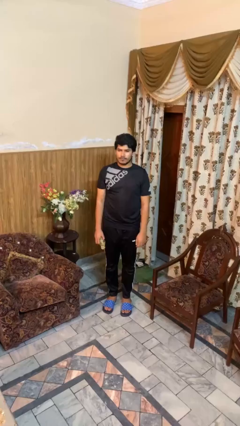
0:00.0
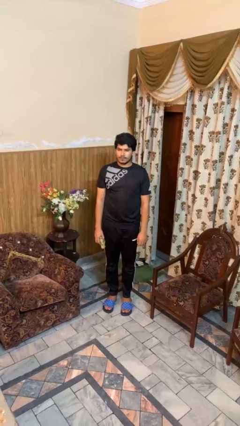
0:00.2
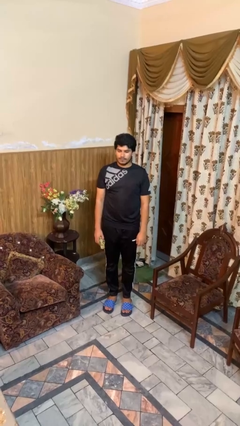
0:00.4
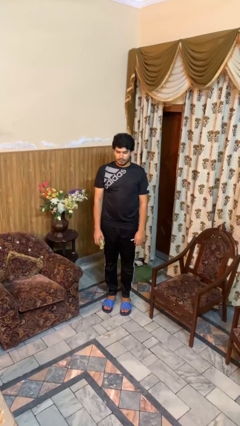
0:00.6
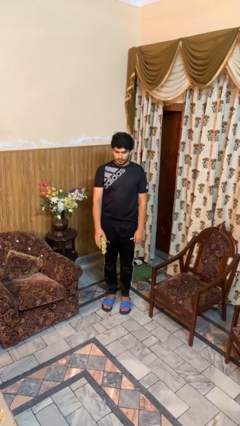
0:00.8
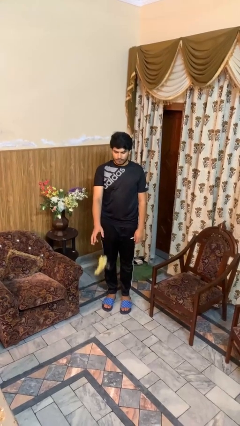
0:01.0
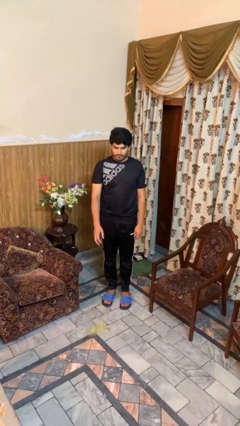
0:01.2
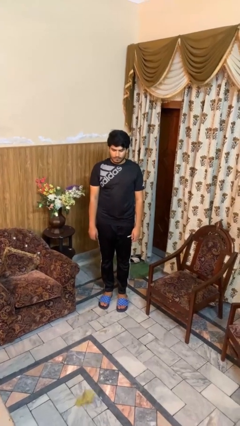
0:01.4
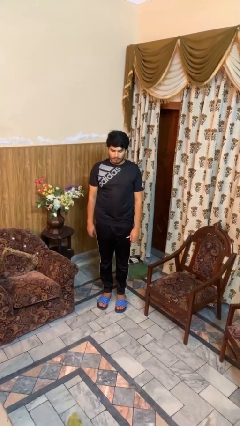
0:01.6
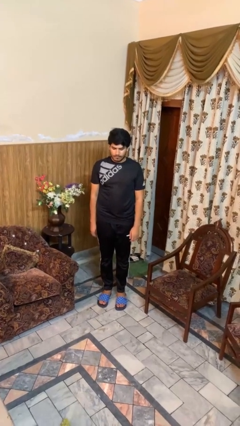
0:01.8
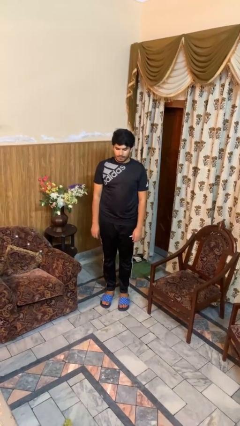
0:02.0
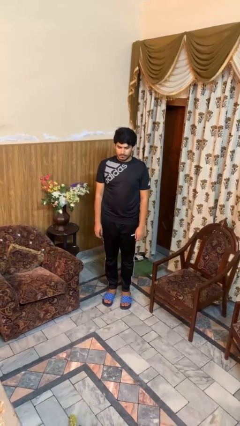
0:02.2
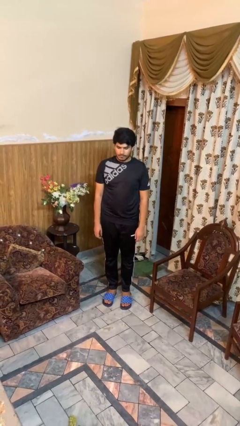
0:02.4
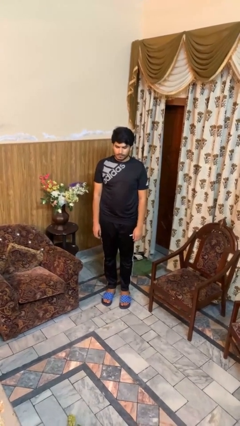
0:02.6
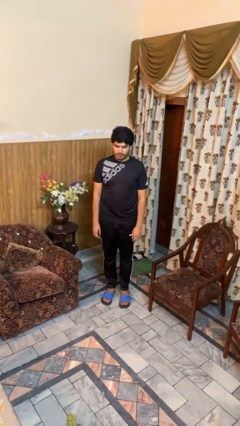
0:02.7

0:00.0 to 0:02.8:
person throws object to ground

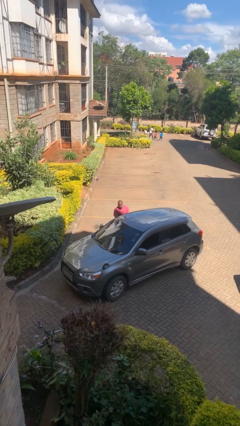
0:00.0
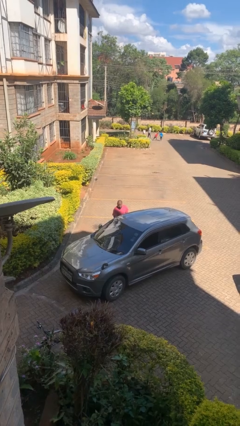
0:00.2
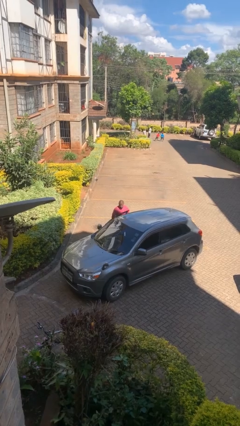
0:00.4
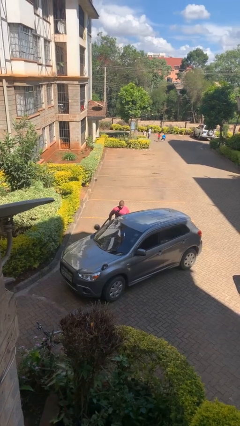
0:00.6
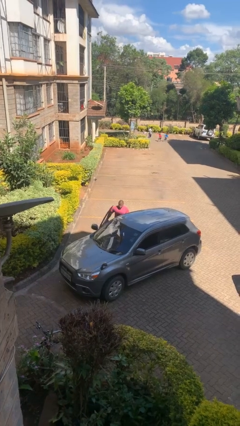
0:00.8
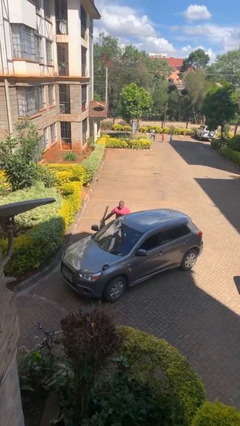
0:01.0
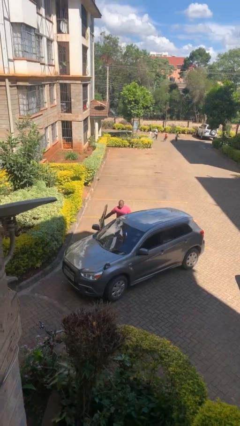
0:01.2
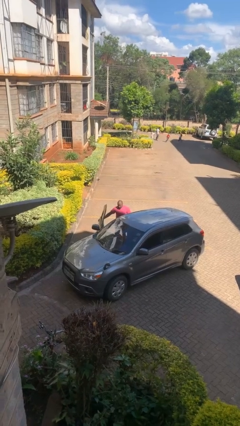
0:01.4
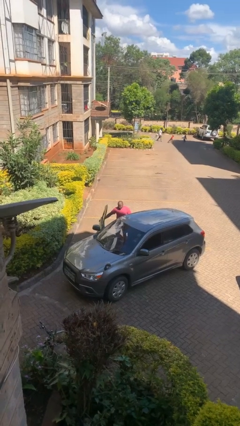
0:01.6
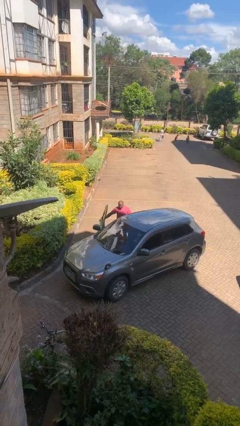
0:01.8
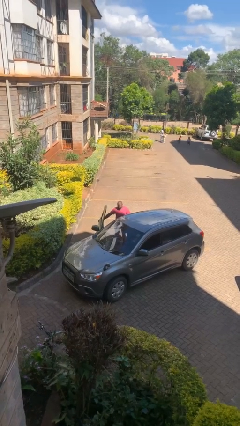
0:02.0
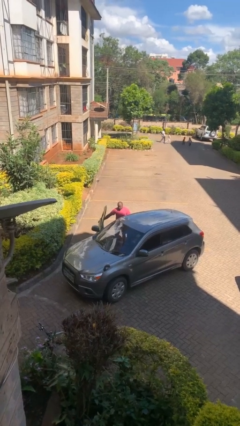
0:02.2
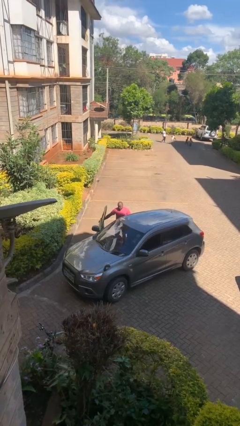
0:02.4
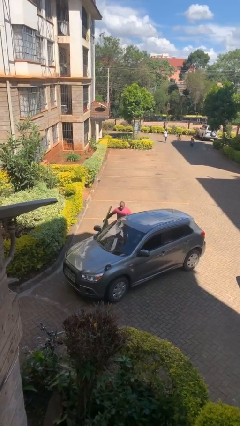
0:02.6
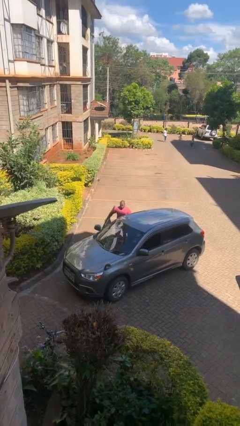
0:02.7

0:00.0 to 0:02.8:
person opens car door

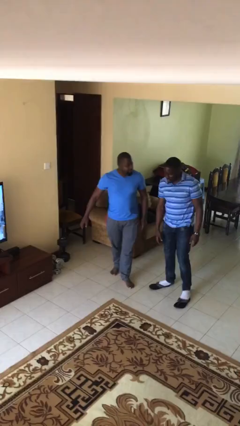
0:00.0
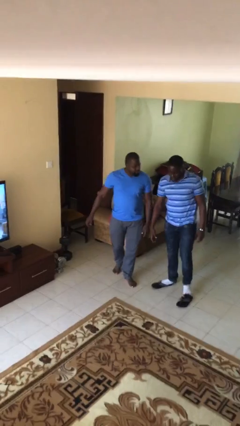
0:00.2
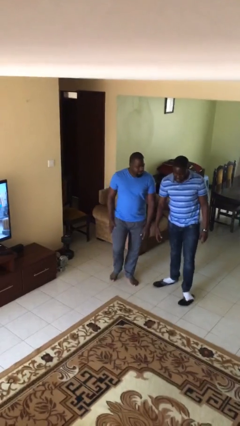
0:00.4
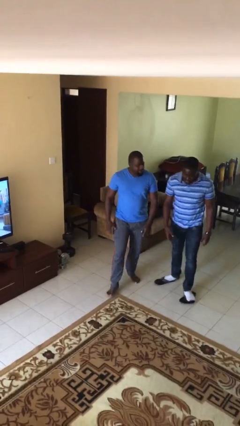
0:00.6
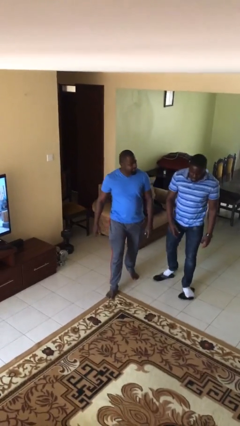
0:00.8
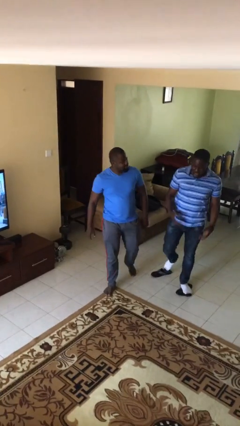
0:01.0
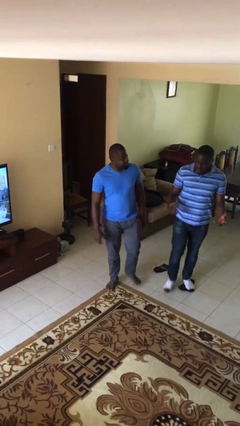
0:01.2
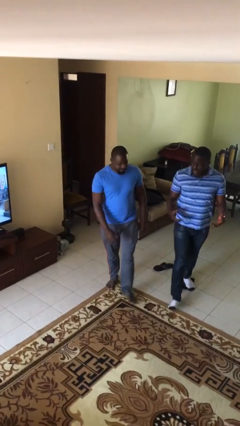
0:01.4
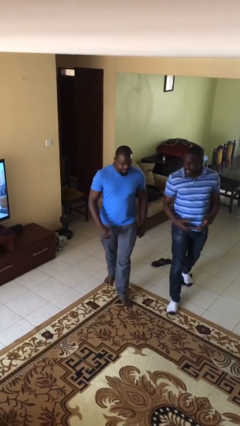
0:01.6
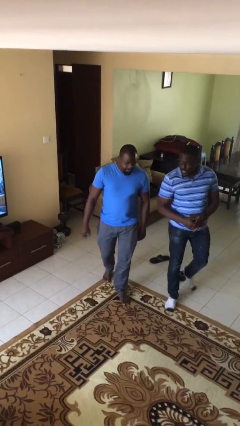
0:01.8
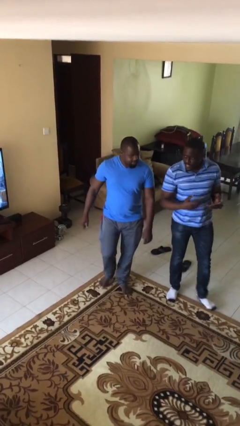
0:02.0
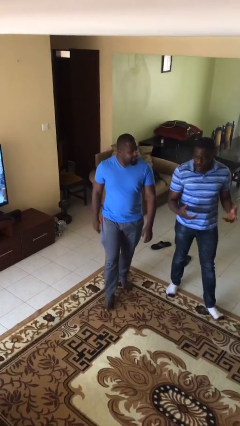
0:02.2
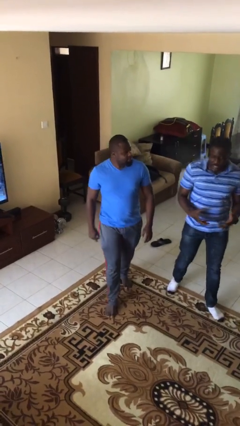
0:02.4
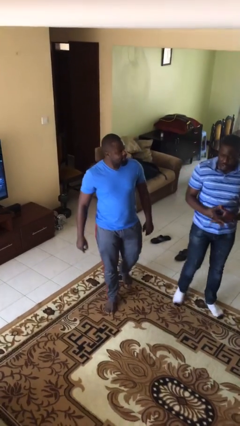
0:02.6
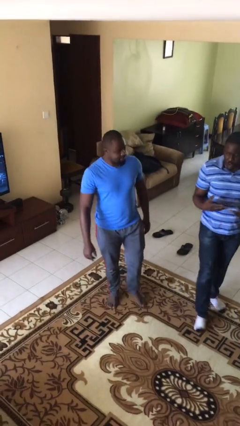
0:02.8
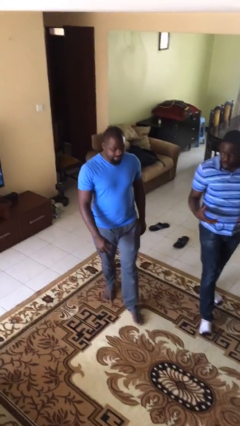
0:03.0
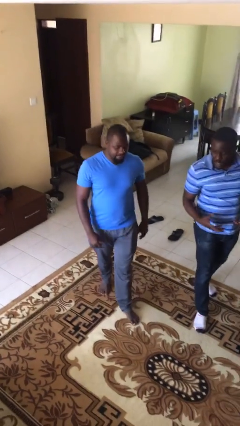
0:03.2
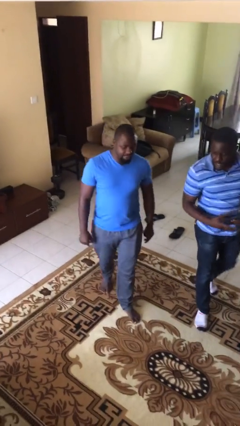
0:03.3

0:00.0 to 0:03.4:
person talks to person

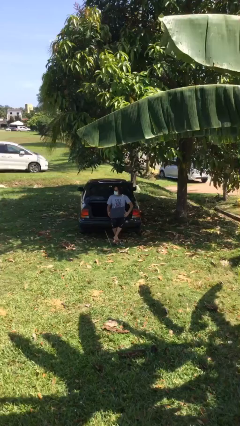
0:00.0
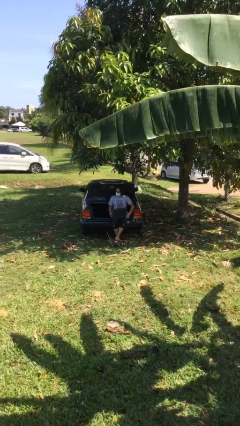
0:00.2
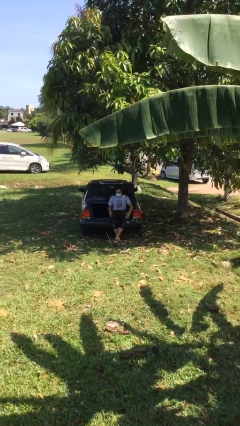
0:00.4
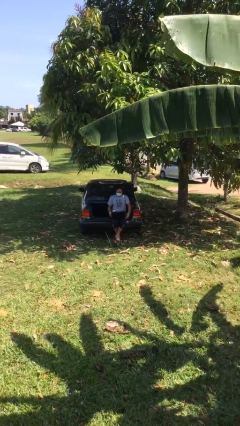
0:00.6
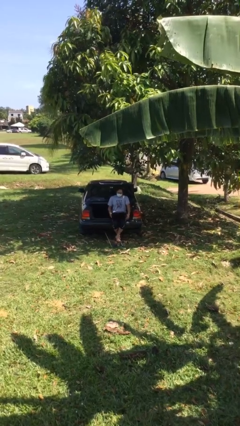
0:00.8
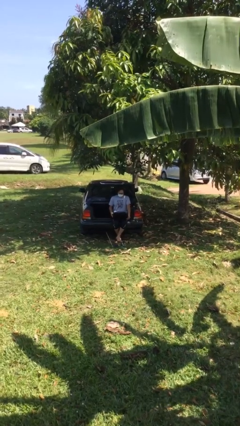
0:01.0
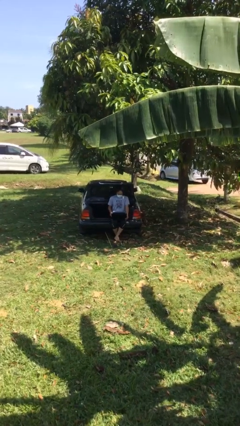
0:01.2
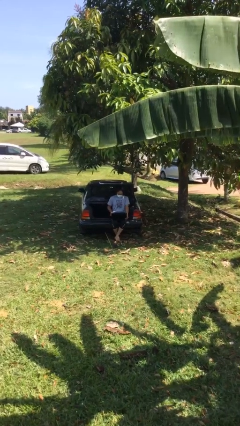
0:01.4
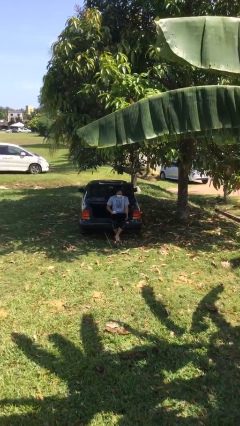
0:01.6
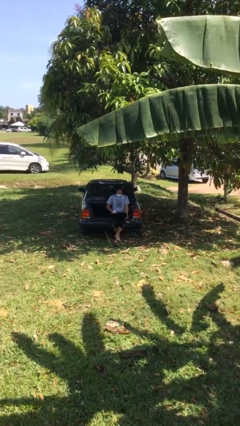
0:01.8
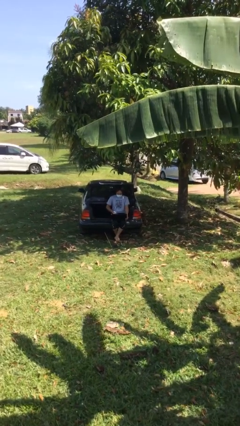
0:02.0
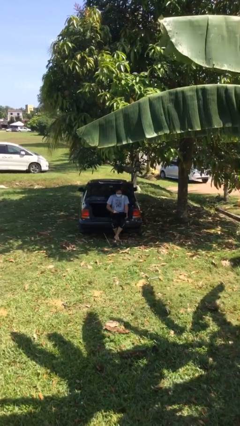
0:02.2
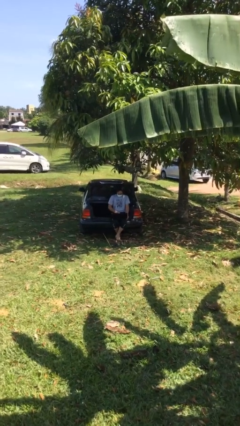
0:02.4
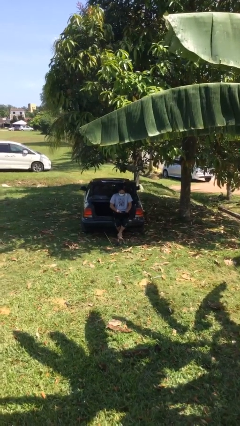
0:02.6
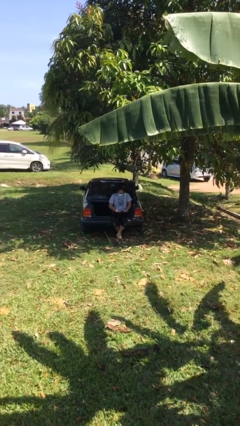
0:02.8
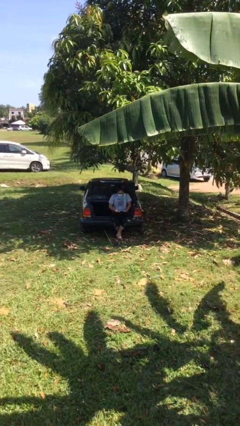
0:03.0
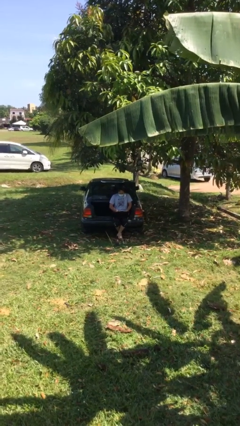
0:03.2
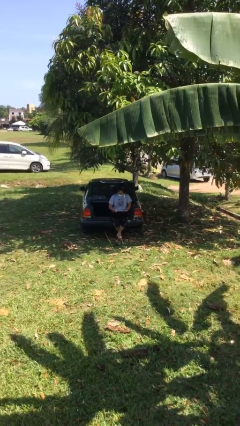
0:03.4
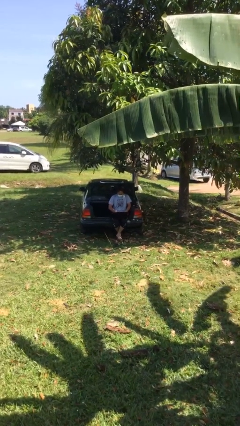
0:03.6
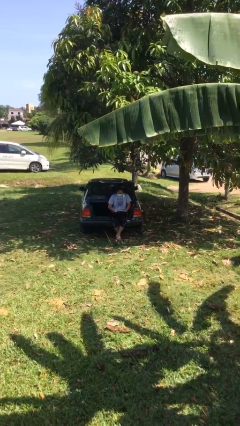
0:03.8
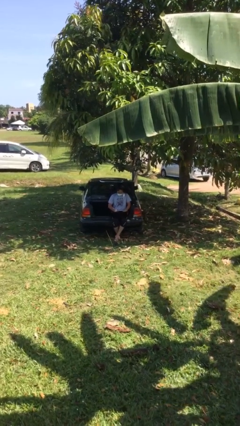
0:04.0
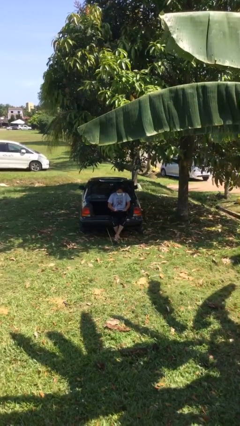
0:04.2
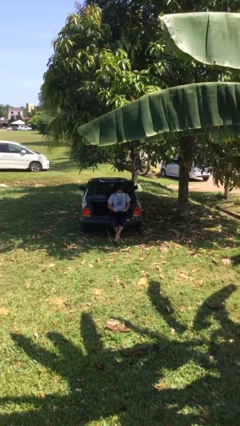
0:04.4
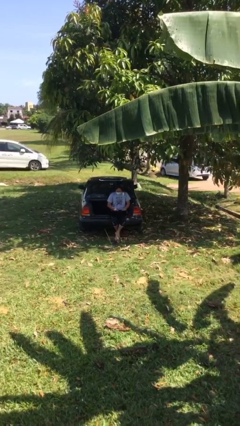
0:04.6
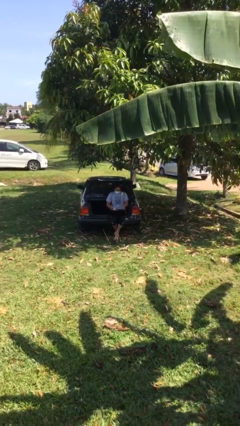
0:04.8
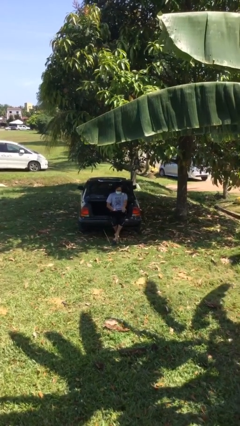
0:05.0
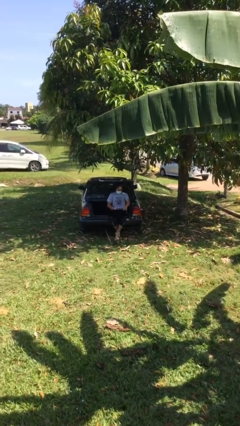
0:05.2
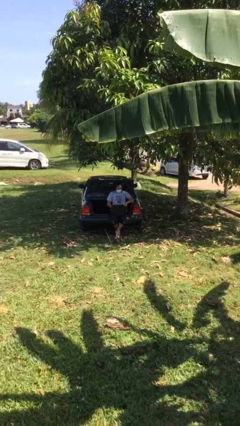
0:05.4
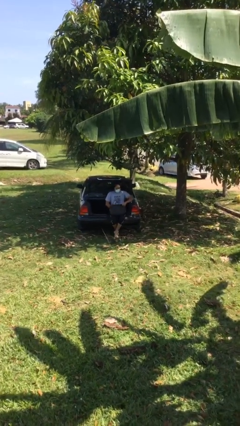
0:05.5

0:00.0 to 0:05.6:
person interacts with laptop

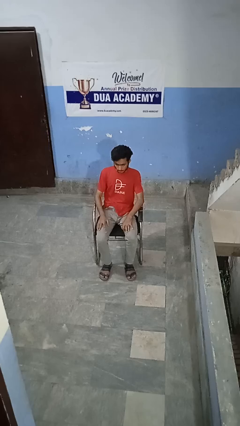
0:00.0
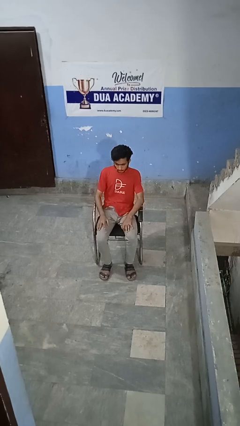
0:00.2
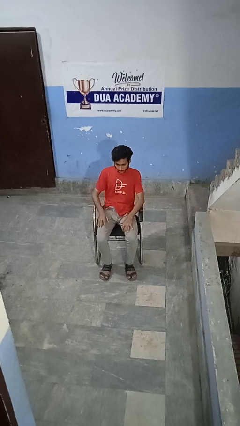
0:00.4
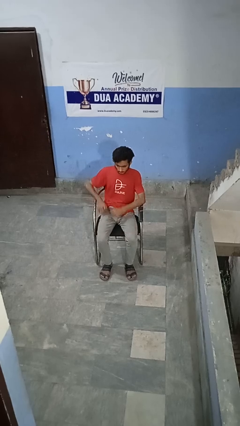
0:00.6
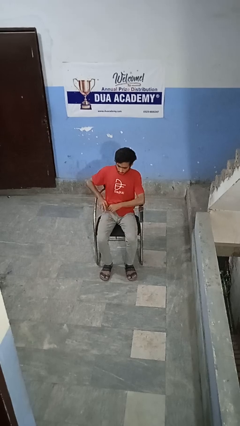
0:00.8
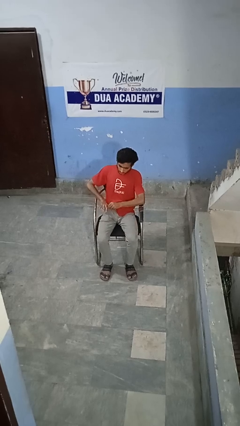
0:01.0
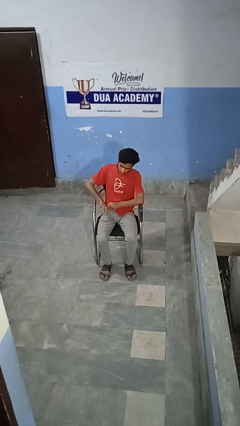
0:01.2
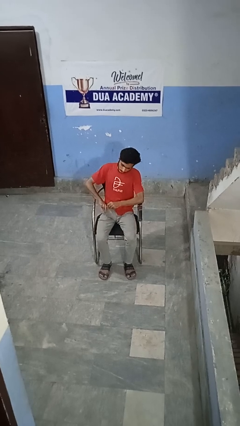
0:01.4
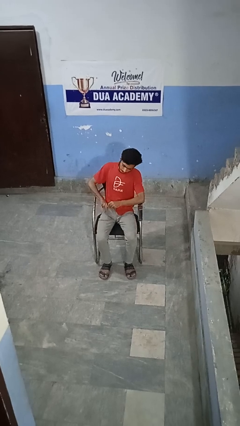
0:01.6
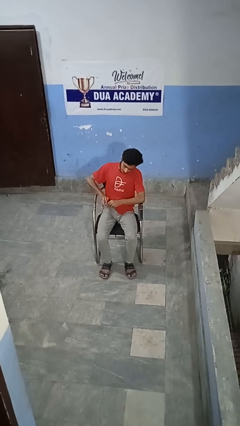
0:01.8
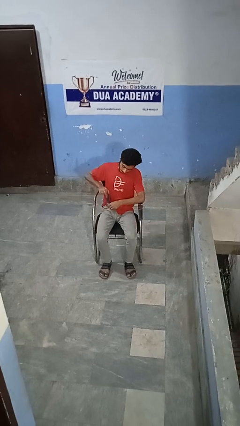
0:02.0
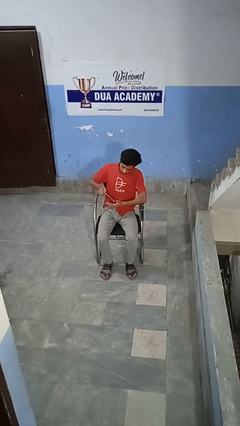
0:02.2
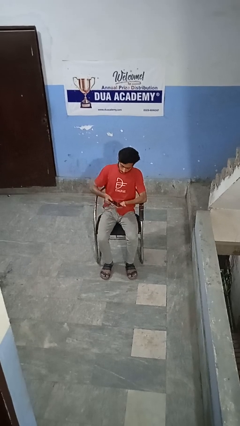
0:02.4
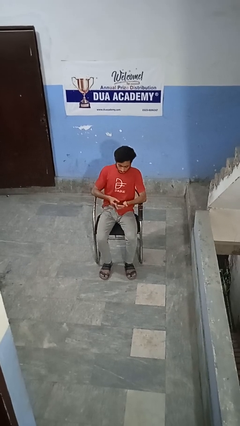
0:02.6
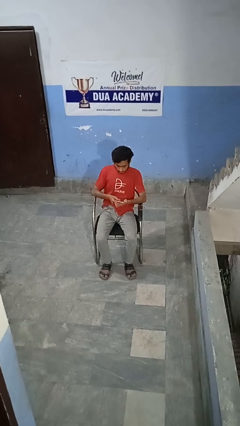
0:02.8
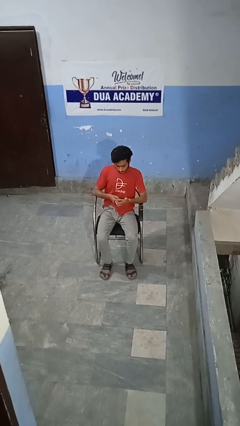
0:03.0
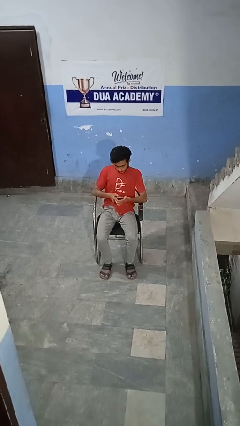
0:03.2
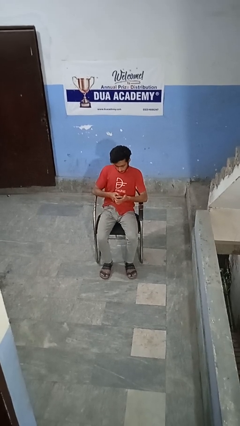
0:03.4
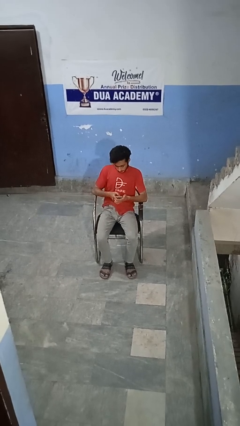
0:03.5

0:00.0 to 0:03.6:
person takes phone from pocket
